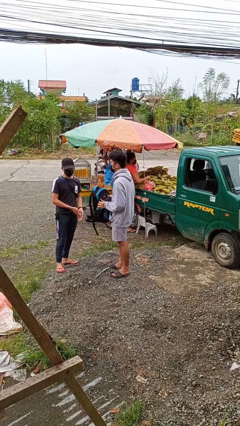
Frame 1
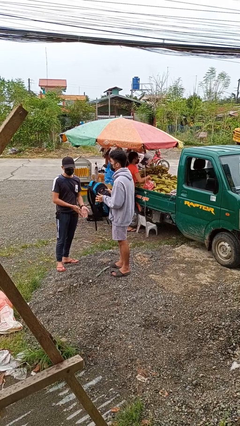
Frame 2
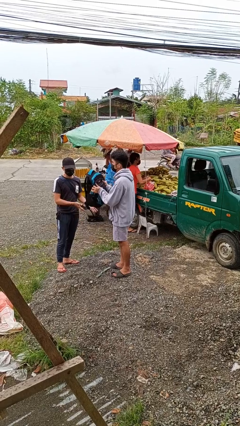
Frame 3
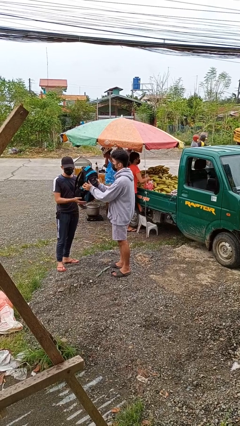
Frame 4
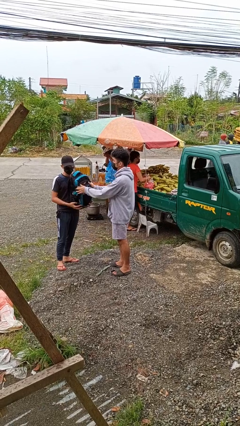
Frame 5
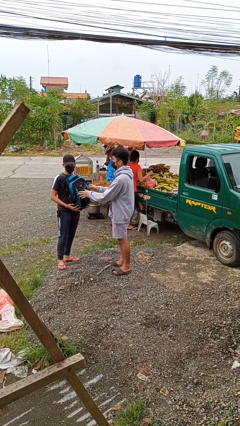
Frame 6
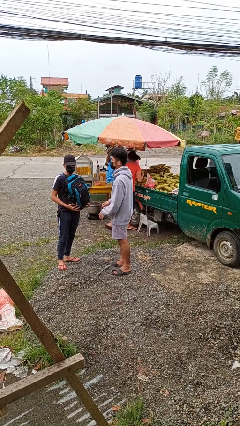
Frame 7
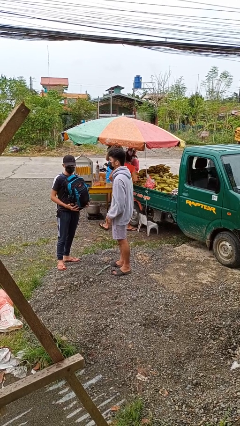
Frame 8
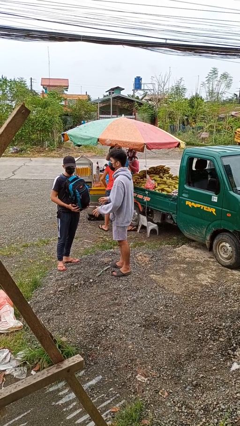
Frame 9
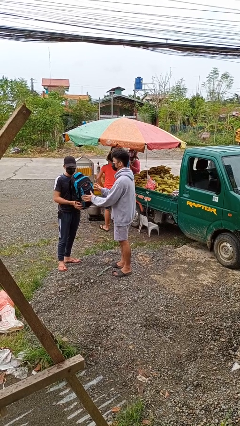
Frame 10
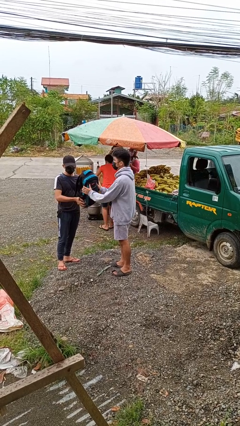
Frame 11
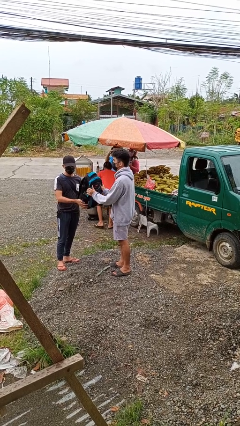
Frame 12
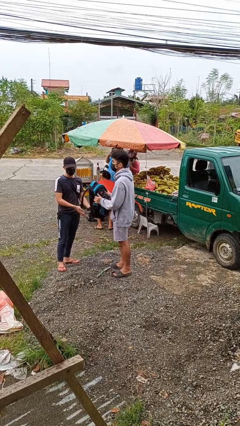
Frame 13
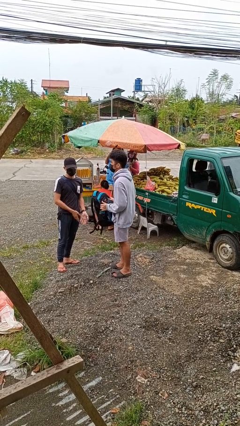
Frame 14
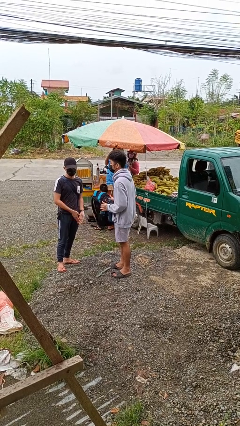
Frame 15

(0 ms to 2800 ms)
person transfers object to person

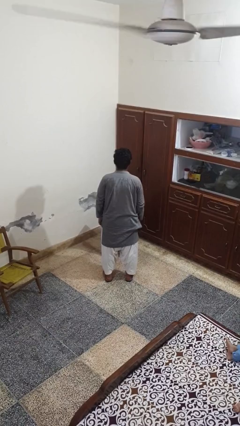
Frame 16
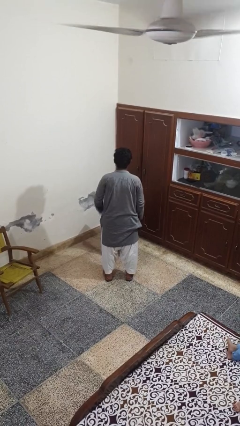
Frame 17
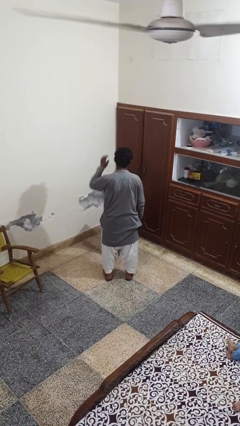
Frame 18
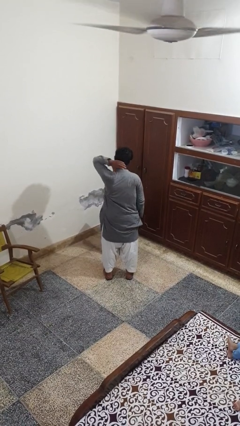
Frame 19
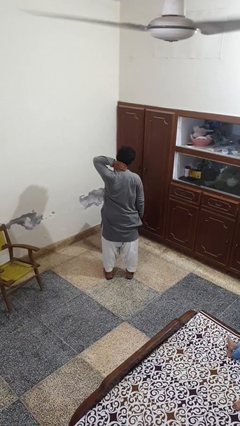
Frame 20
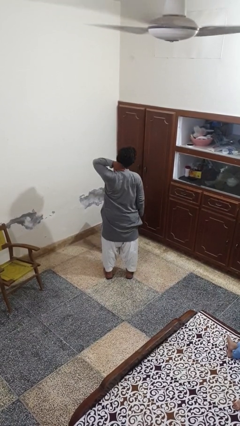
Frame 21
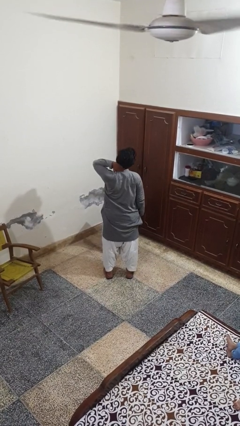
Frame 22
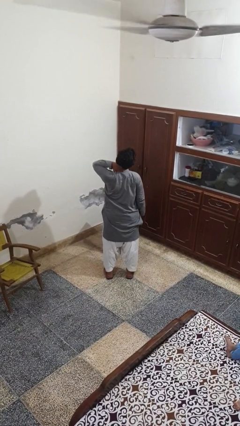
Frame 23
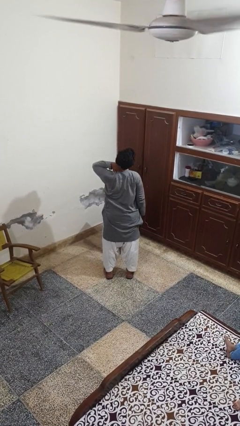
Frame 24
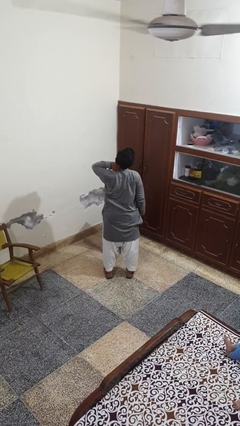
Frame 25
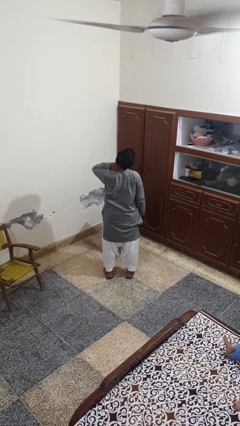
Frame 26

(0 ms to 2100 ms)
person rubs neck

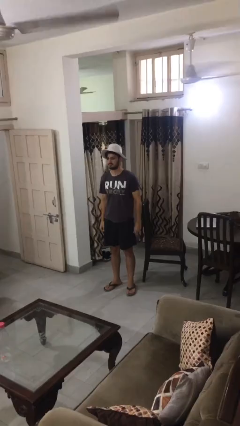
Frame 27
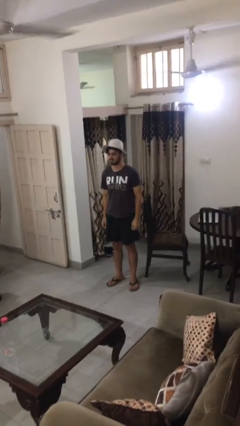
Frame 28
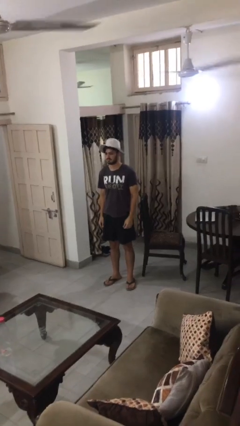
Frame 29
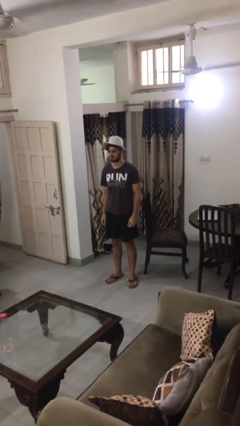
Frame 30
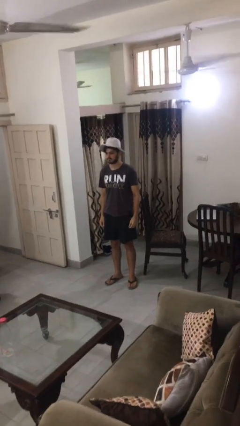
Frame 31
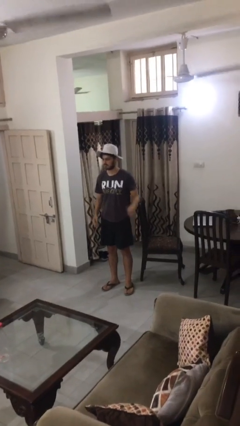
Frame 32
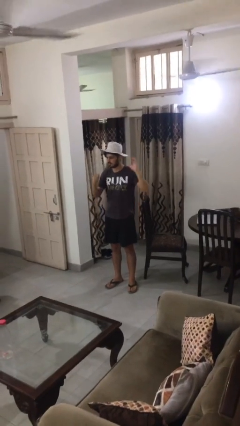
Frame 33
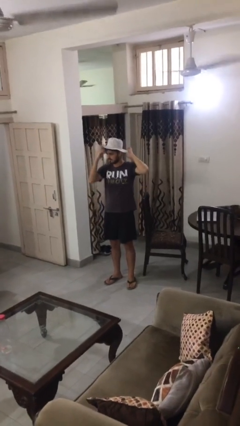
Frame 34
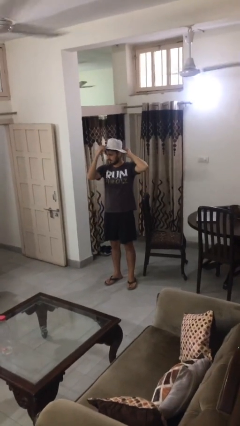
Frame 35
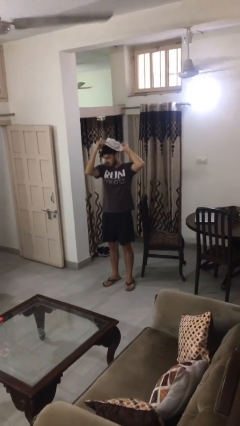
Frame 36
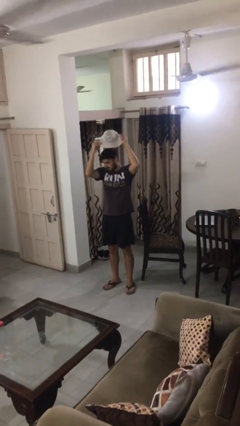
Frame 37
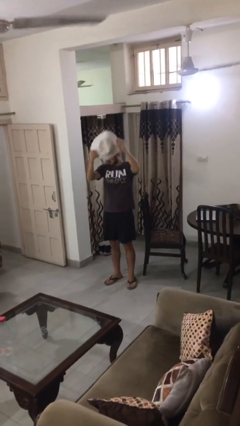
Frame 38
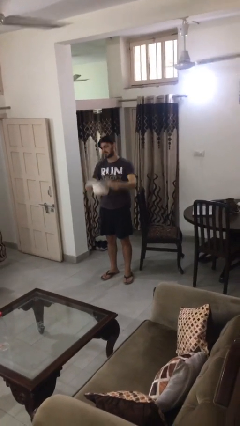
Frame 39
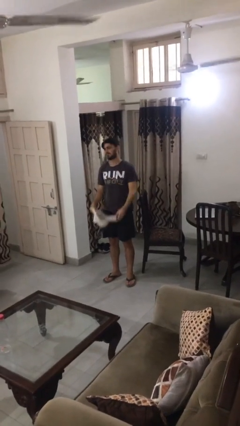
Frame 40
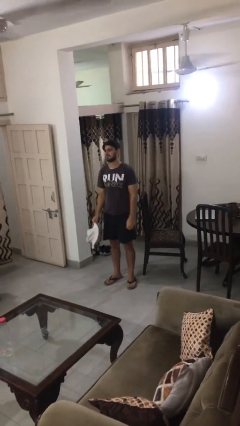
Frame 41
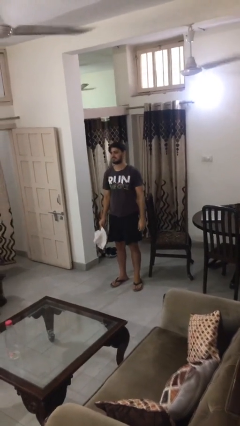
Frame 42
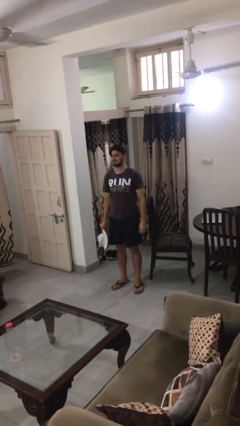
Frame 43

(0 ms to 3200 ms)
person takes off hat

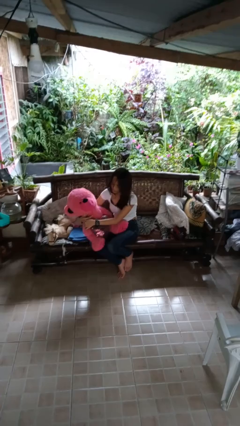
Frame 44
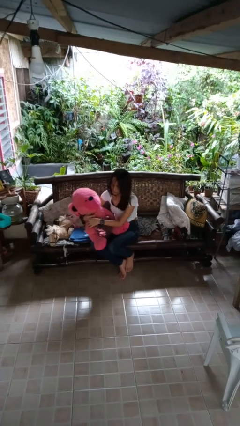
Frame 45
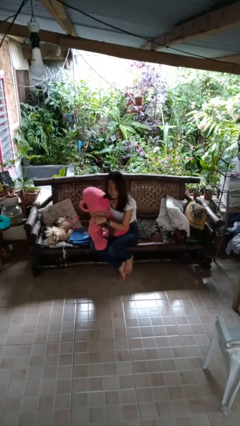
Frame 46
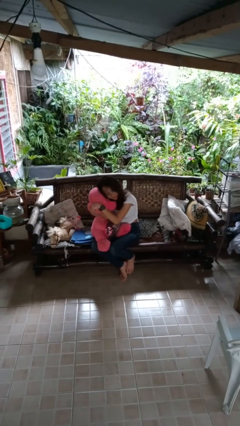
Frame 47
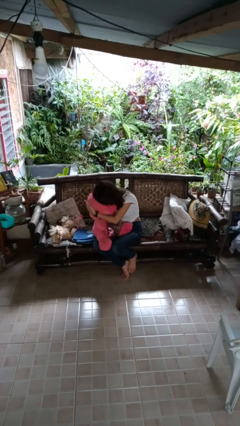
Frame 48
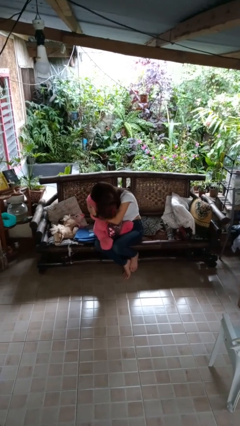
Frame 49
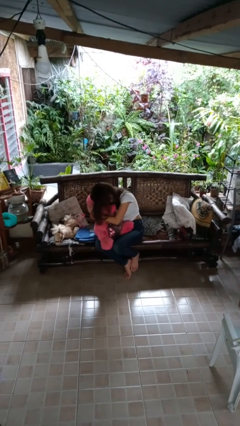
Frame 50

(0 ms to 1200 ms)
person hugs stuffed animal

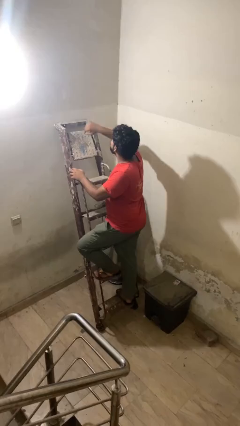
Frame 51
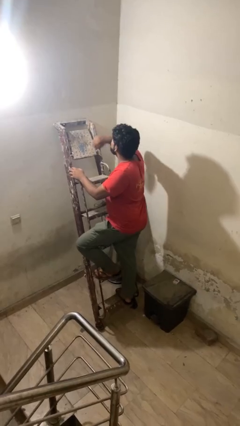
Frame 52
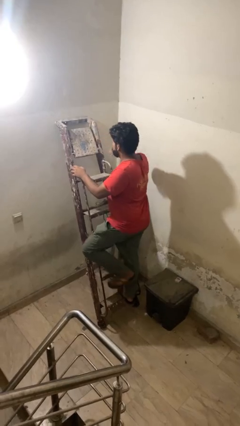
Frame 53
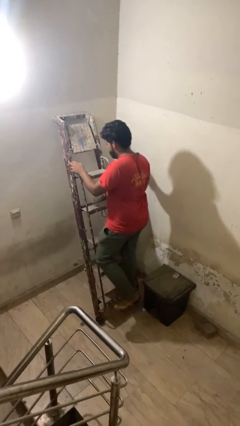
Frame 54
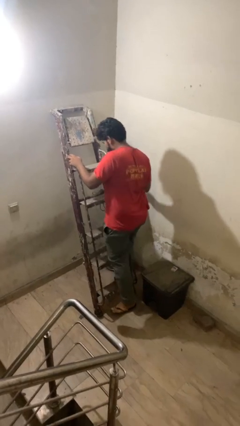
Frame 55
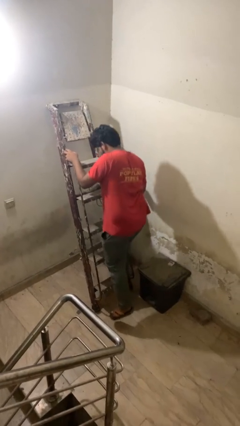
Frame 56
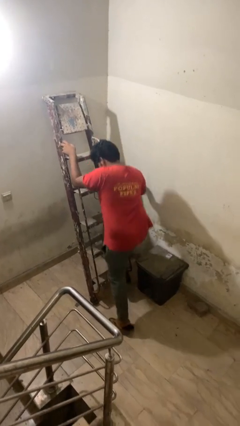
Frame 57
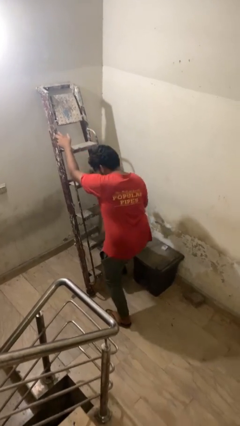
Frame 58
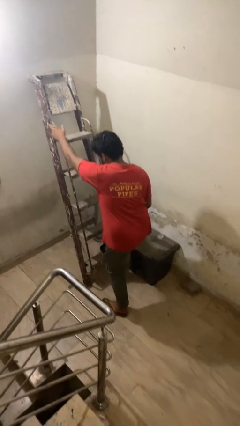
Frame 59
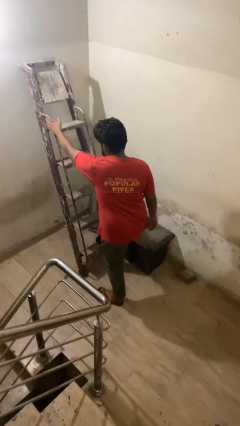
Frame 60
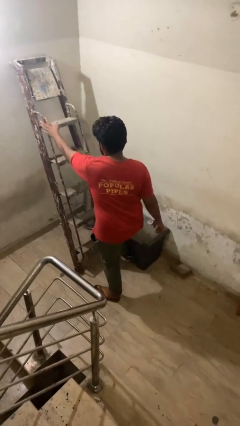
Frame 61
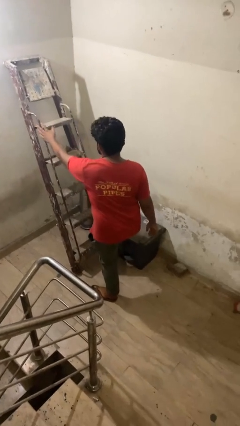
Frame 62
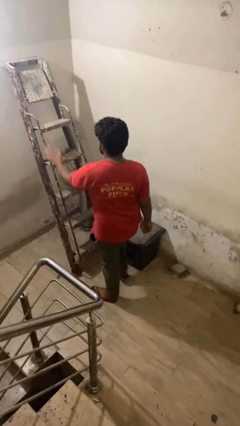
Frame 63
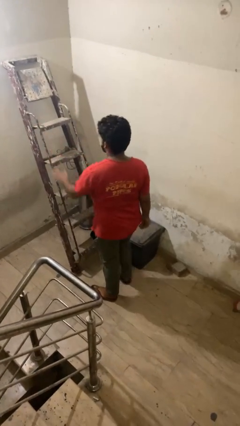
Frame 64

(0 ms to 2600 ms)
person climbs down ladder

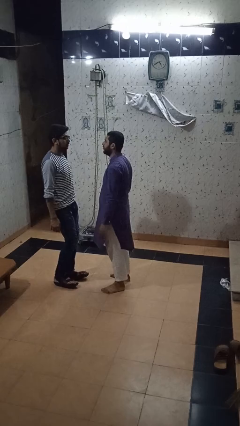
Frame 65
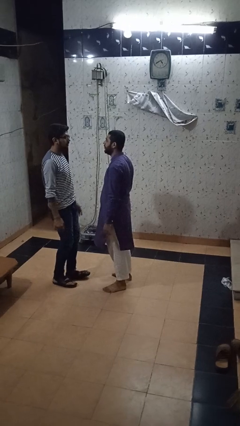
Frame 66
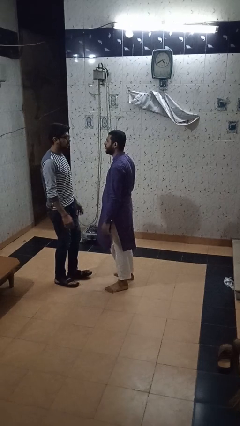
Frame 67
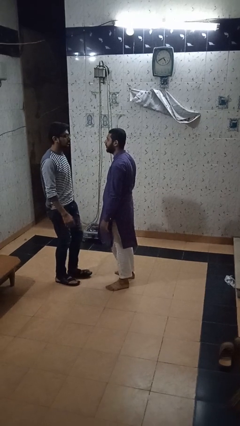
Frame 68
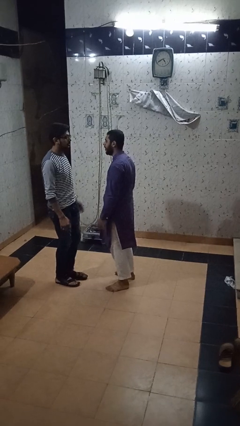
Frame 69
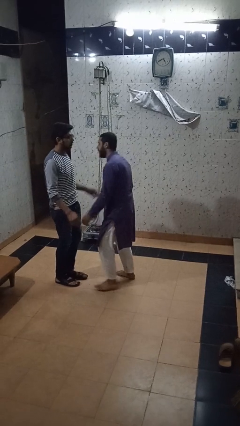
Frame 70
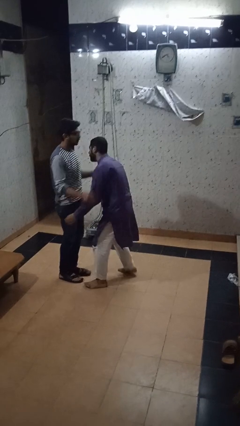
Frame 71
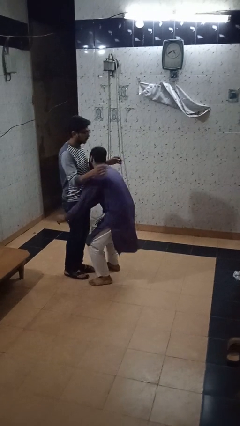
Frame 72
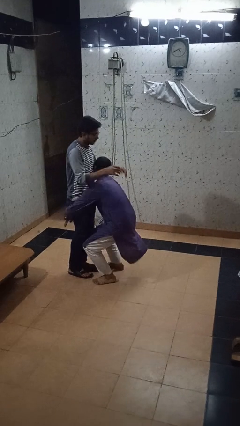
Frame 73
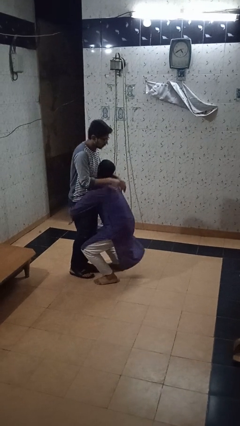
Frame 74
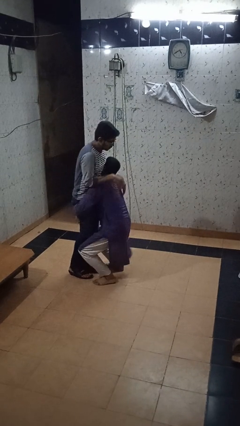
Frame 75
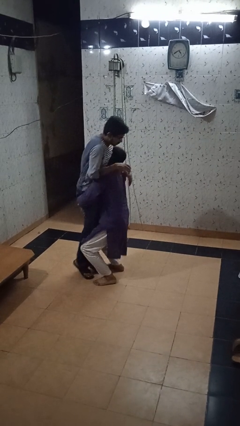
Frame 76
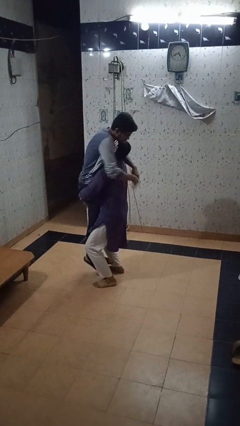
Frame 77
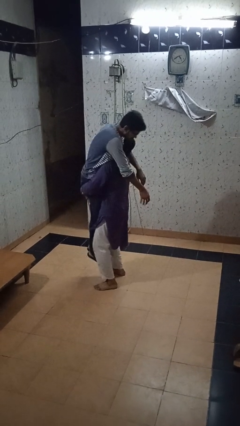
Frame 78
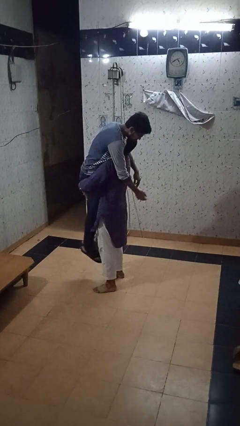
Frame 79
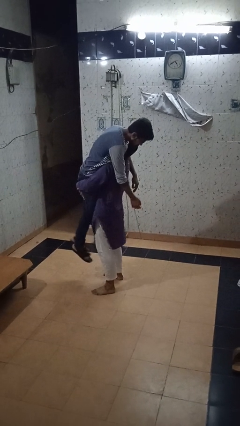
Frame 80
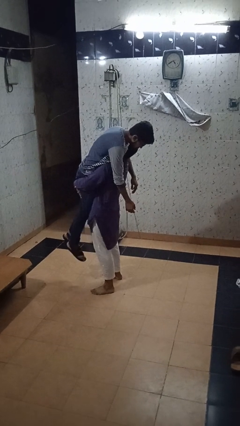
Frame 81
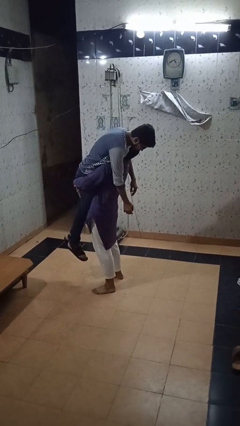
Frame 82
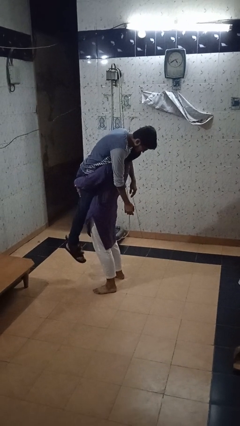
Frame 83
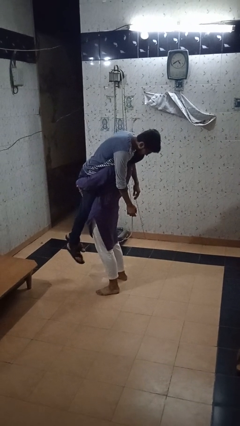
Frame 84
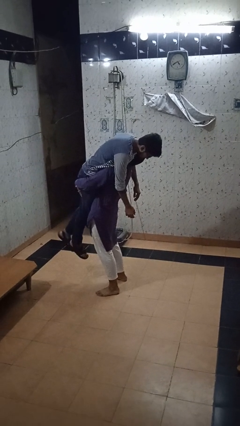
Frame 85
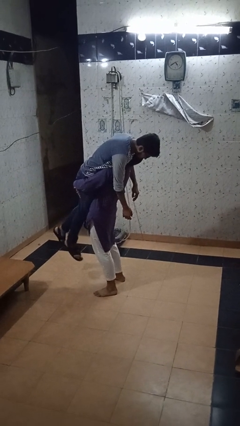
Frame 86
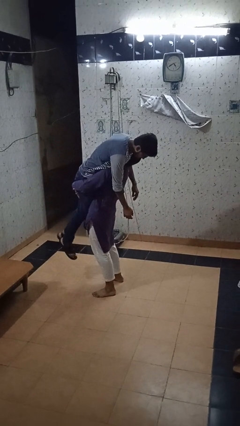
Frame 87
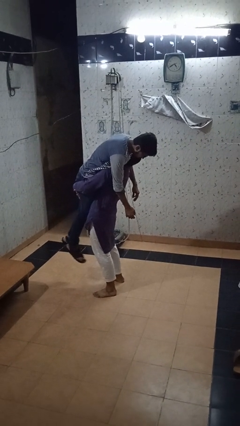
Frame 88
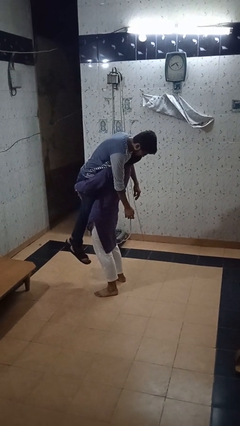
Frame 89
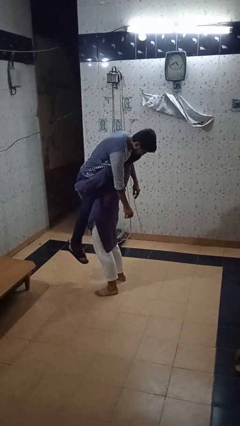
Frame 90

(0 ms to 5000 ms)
person carries person over shoulder

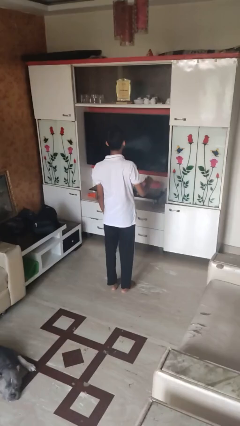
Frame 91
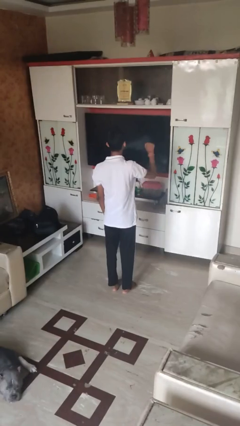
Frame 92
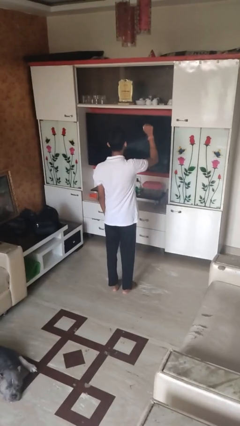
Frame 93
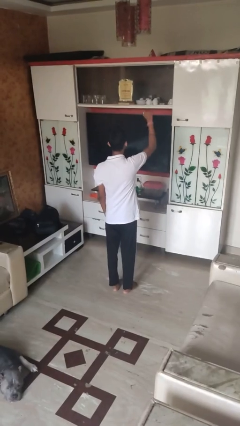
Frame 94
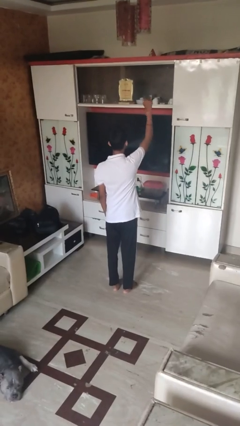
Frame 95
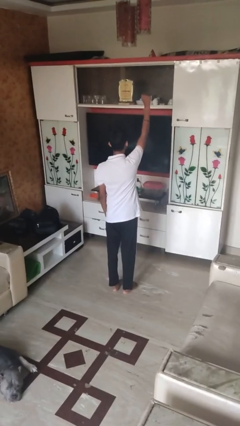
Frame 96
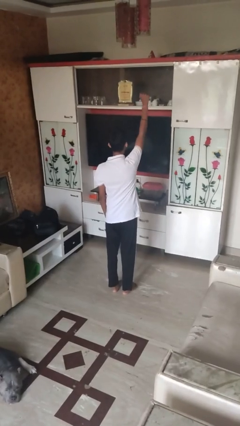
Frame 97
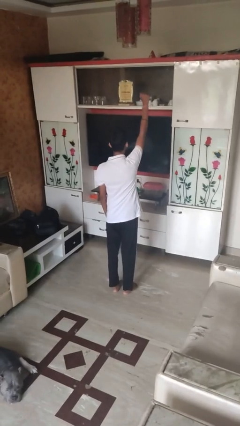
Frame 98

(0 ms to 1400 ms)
person gestures raise hand
